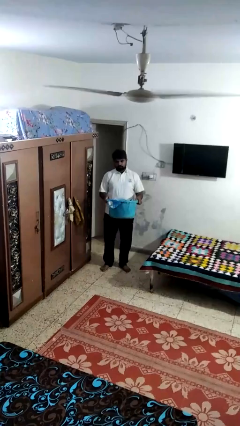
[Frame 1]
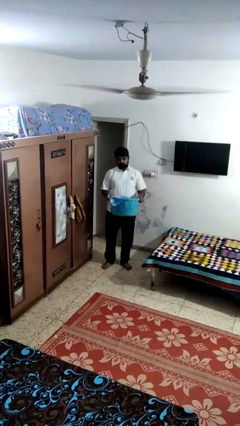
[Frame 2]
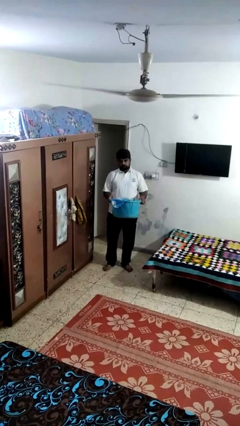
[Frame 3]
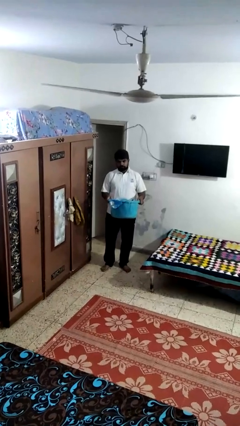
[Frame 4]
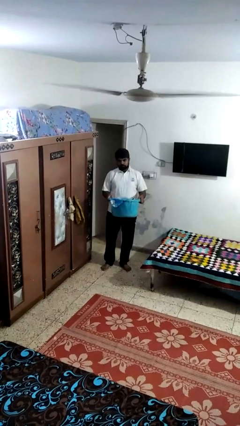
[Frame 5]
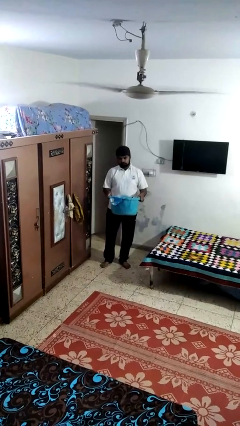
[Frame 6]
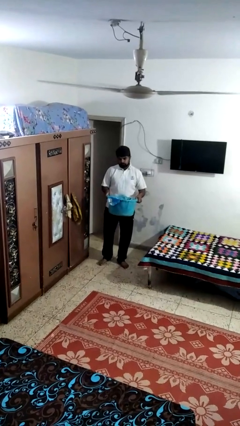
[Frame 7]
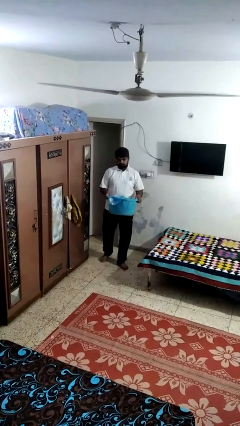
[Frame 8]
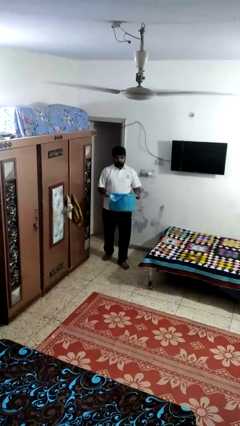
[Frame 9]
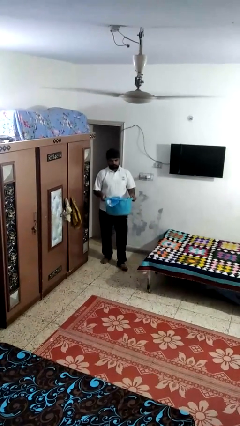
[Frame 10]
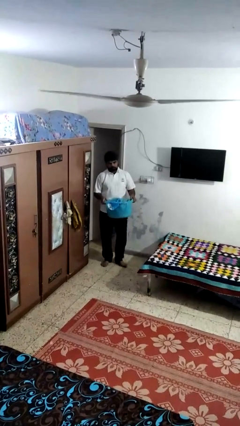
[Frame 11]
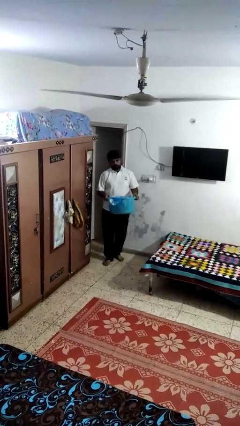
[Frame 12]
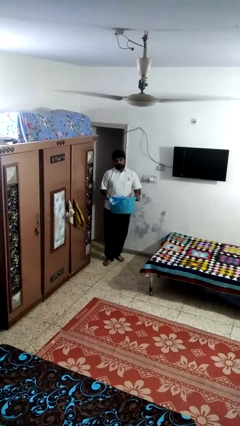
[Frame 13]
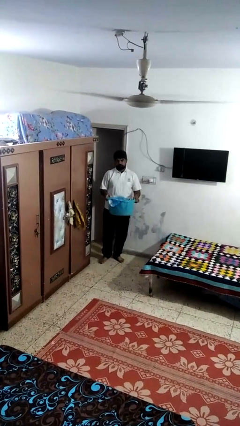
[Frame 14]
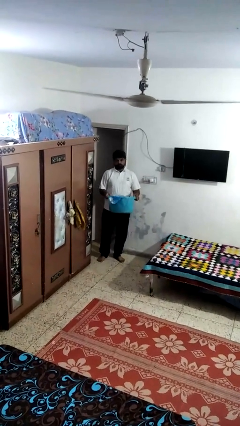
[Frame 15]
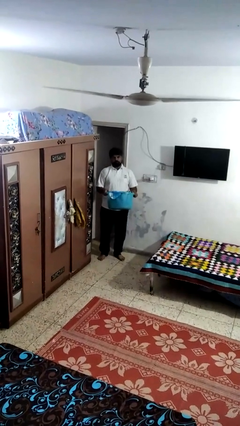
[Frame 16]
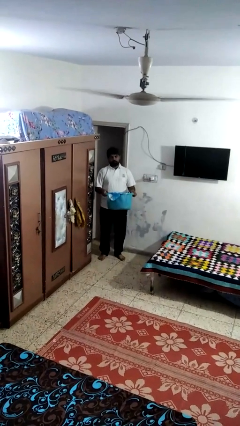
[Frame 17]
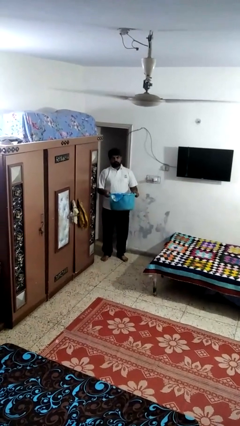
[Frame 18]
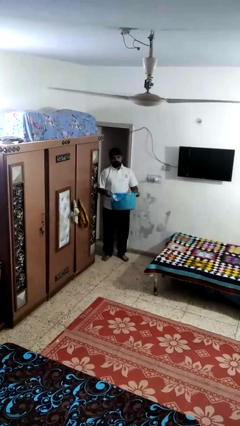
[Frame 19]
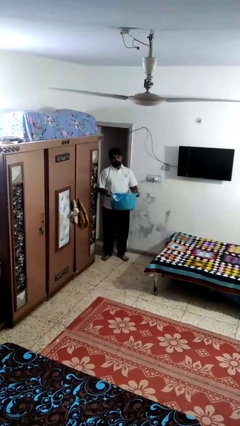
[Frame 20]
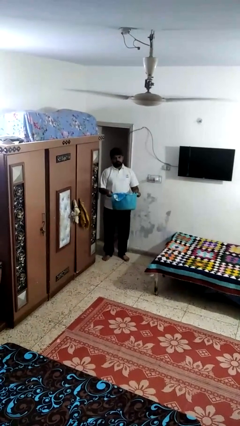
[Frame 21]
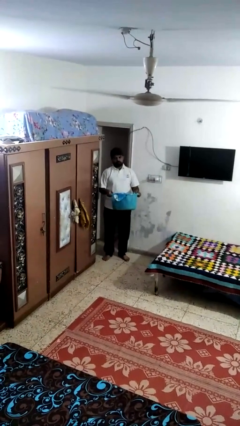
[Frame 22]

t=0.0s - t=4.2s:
person carries laundry basket

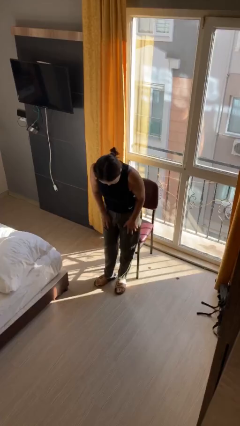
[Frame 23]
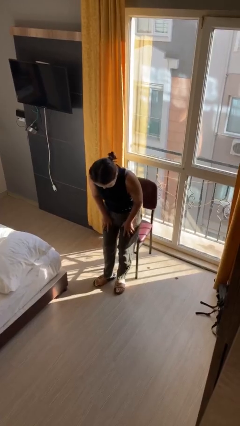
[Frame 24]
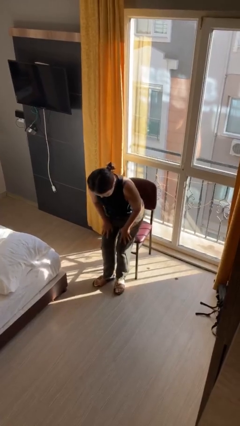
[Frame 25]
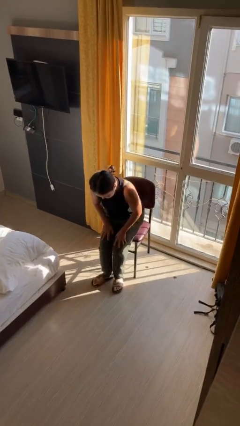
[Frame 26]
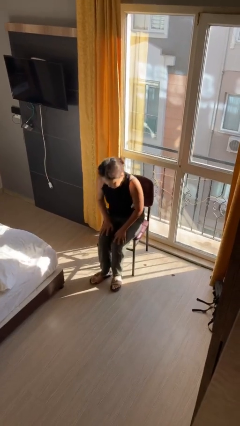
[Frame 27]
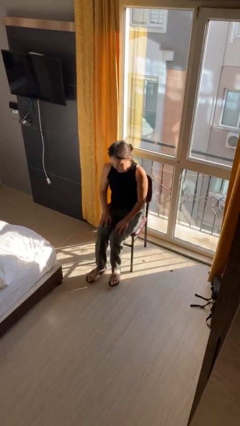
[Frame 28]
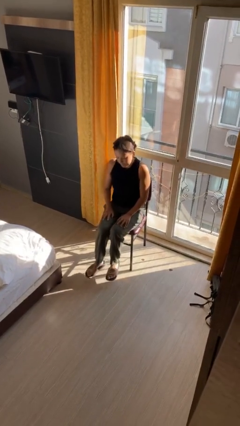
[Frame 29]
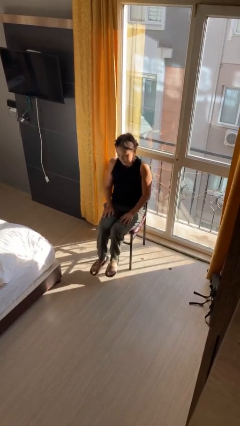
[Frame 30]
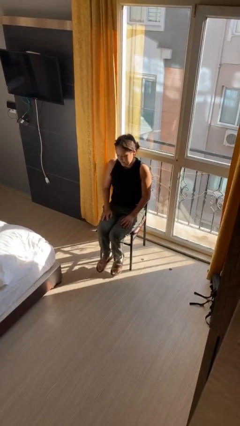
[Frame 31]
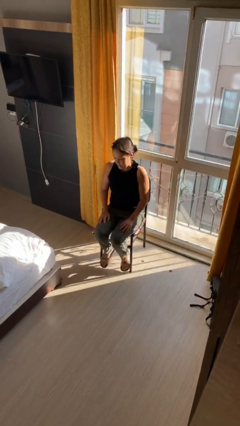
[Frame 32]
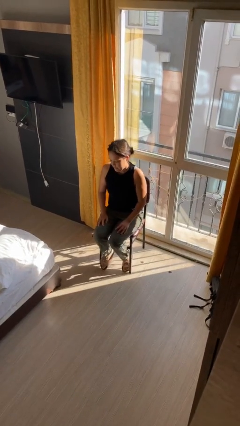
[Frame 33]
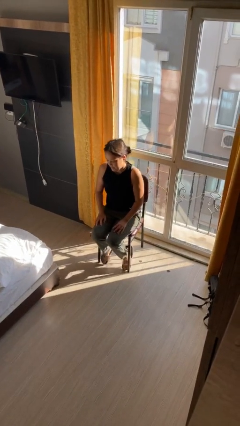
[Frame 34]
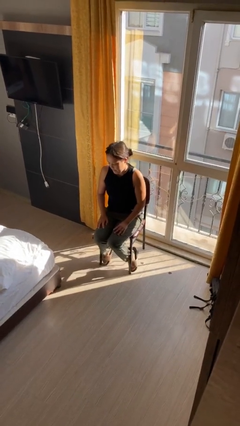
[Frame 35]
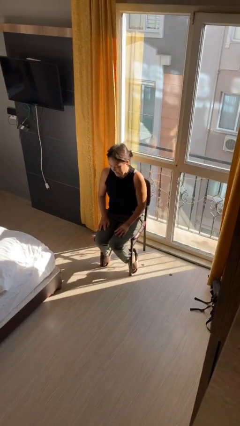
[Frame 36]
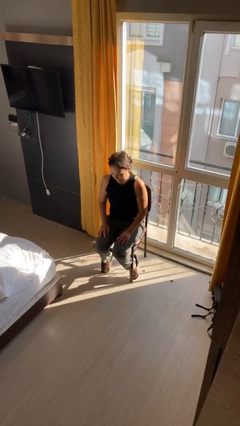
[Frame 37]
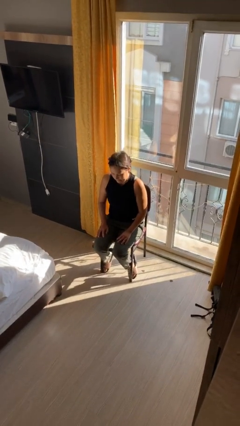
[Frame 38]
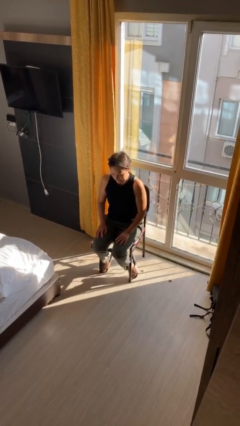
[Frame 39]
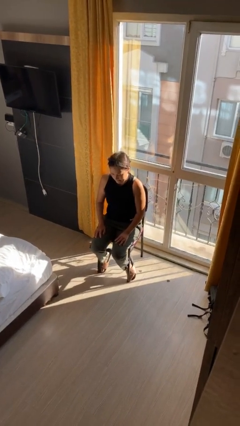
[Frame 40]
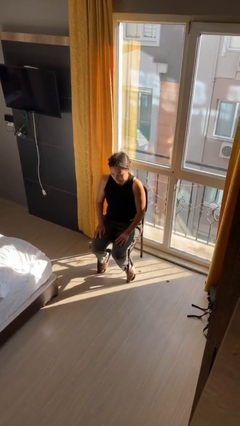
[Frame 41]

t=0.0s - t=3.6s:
person sits down

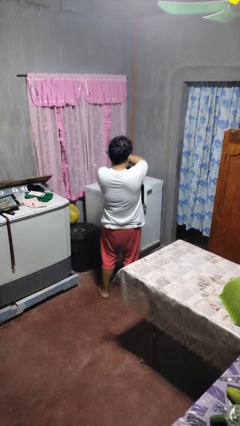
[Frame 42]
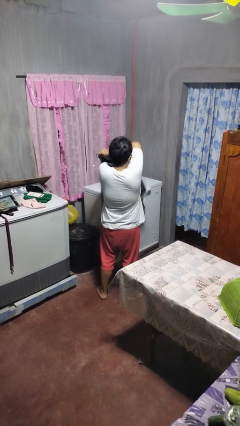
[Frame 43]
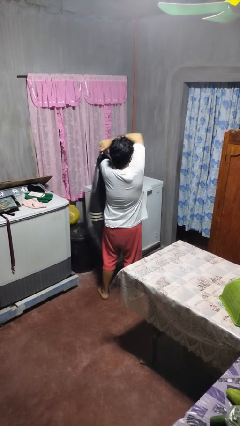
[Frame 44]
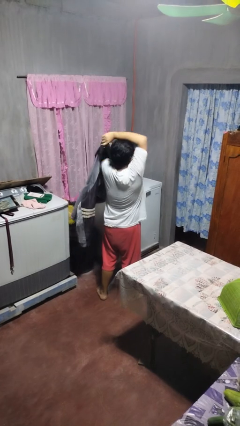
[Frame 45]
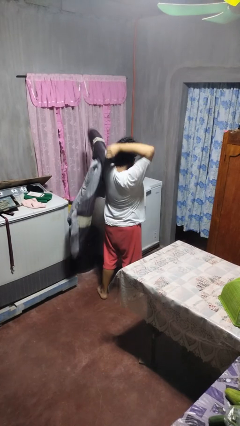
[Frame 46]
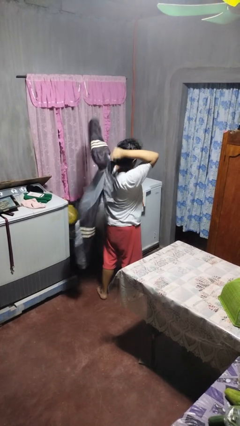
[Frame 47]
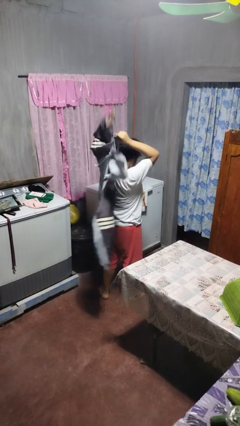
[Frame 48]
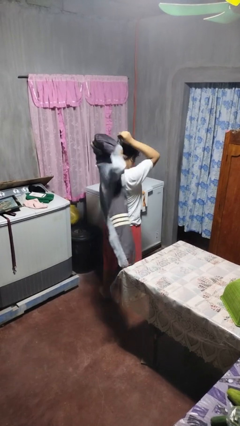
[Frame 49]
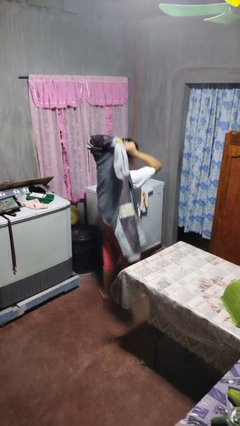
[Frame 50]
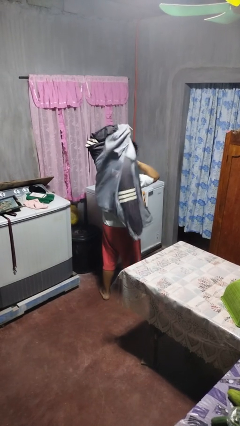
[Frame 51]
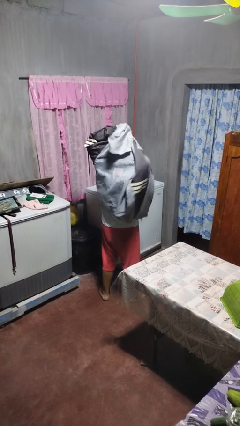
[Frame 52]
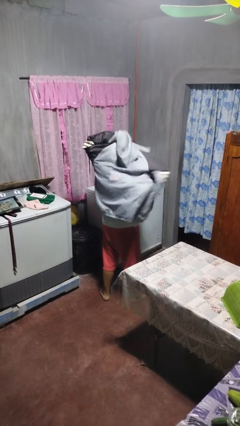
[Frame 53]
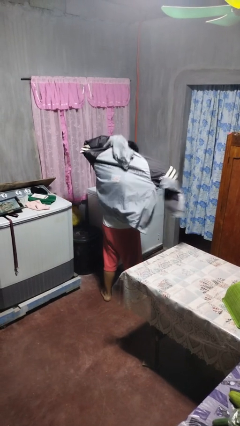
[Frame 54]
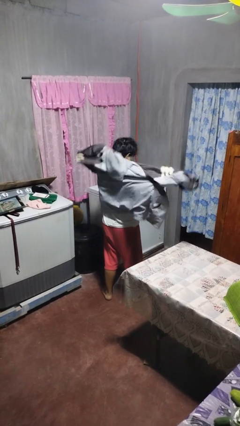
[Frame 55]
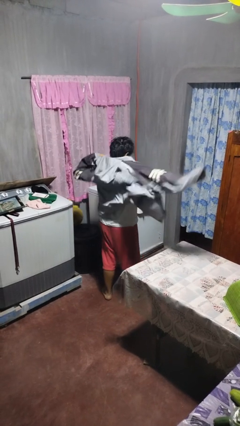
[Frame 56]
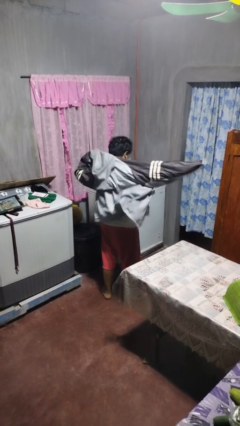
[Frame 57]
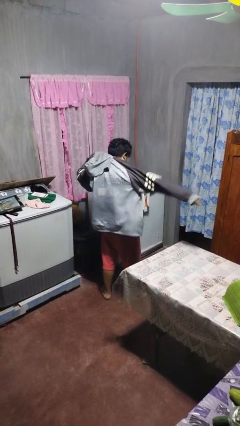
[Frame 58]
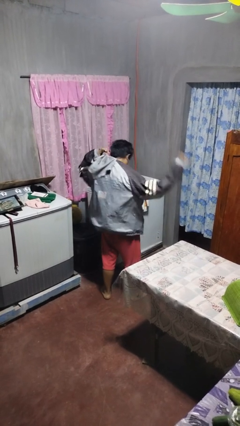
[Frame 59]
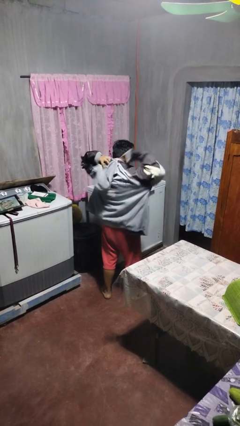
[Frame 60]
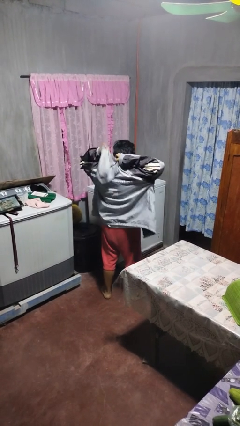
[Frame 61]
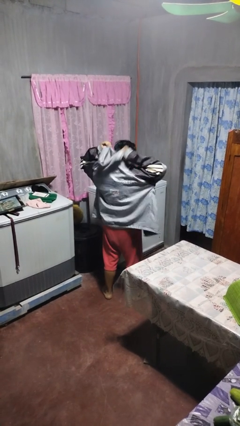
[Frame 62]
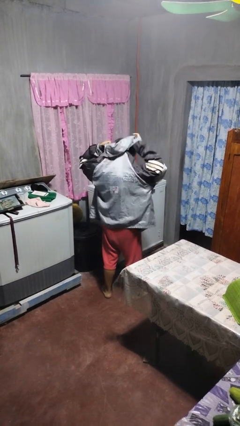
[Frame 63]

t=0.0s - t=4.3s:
person puts on hoodie

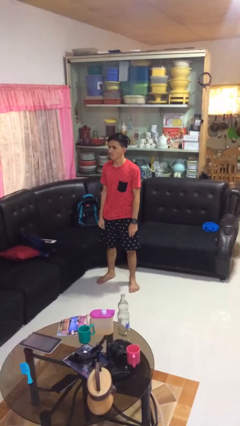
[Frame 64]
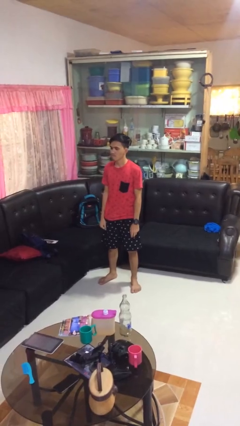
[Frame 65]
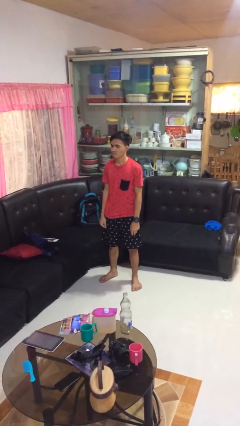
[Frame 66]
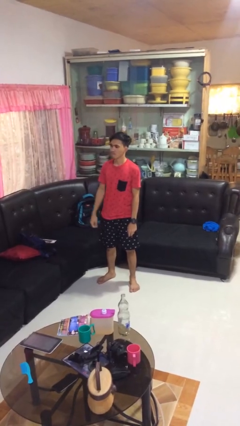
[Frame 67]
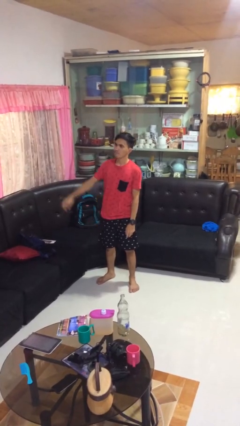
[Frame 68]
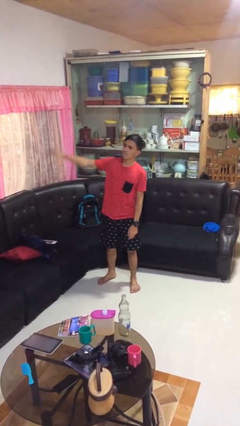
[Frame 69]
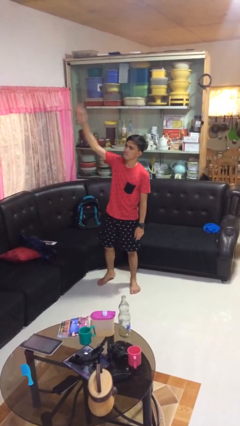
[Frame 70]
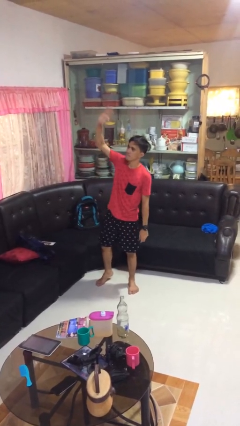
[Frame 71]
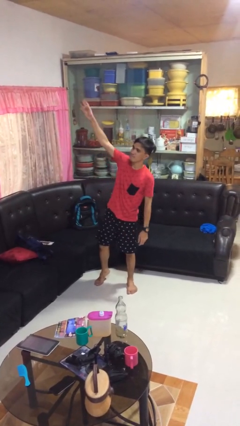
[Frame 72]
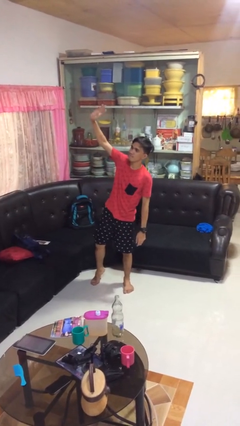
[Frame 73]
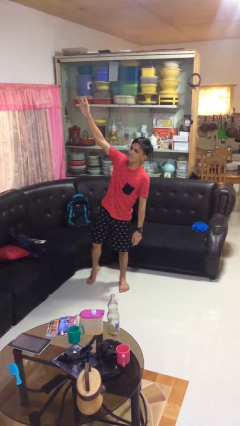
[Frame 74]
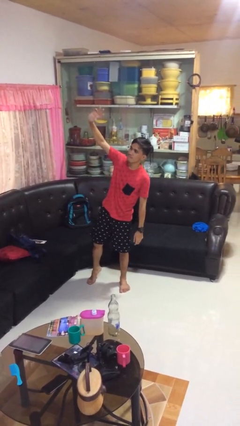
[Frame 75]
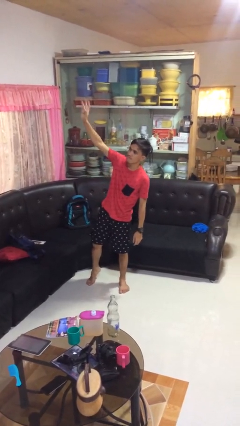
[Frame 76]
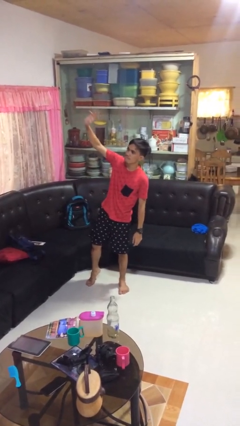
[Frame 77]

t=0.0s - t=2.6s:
person waves at person

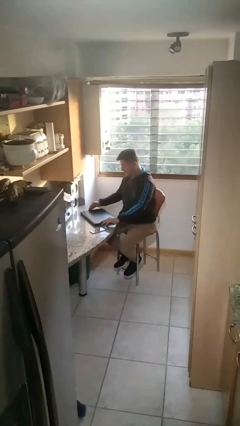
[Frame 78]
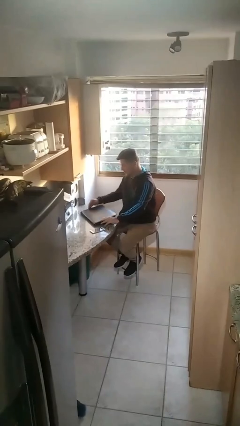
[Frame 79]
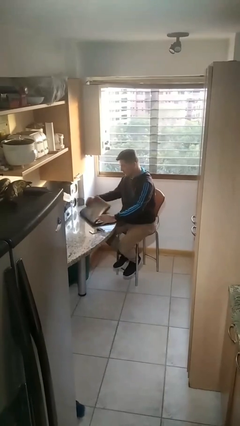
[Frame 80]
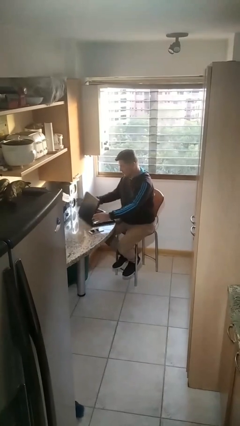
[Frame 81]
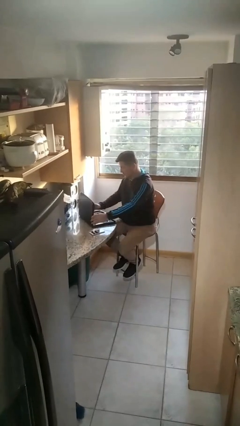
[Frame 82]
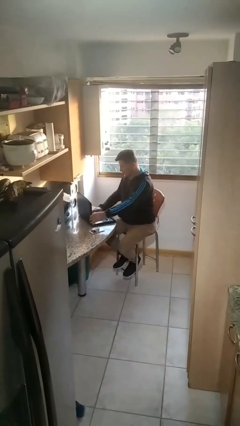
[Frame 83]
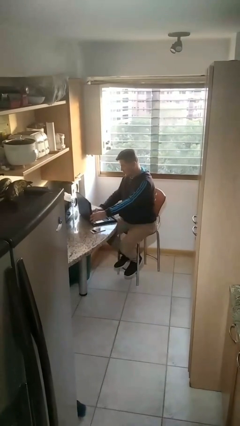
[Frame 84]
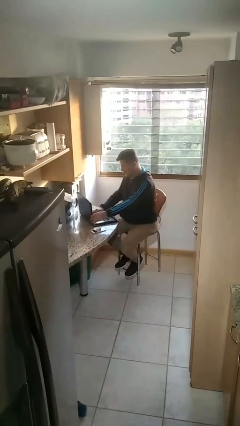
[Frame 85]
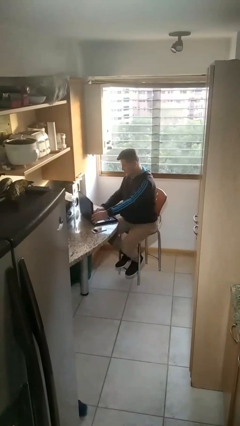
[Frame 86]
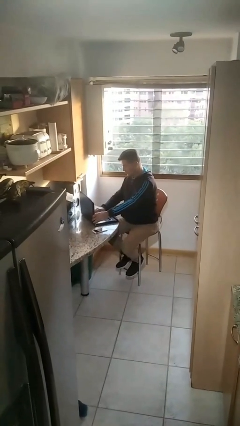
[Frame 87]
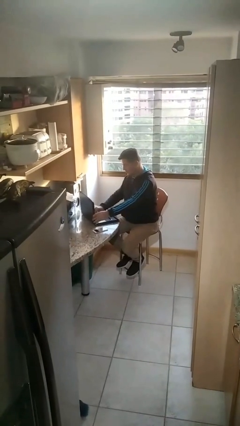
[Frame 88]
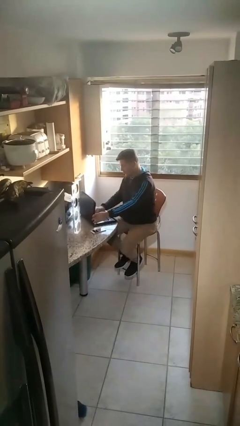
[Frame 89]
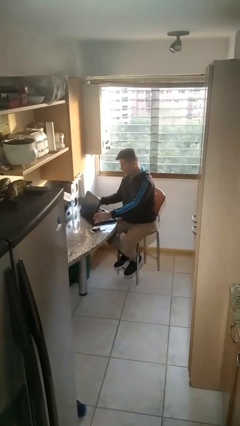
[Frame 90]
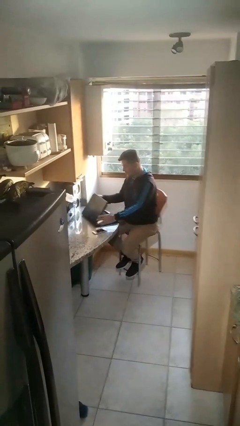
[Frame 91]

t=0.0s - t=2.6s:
person interacts with laptop

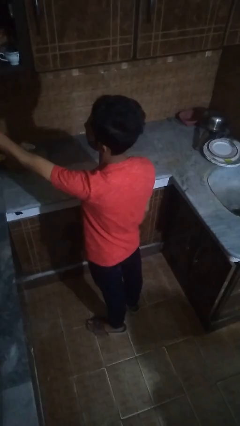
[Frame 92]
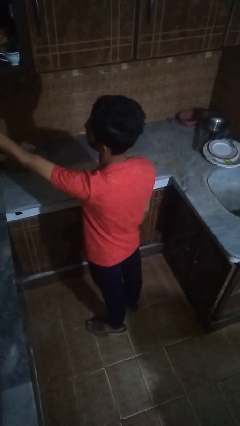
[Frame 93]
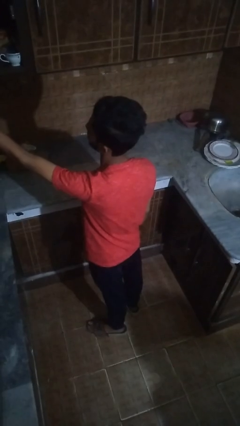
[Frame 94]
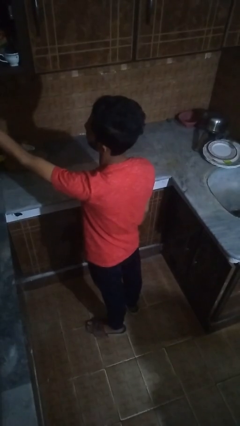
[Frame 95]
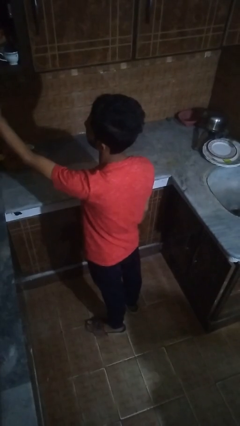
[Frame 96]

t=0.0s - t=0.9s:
person closes cabinet
